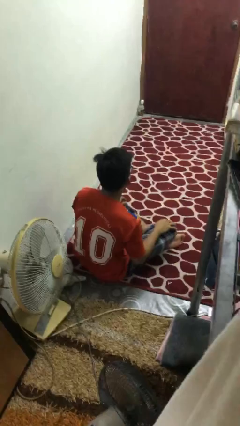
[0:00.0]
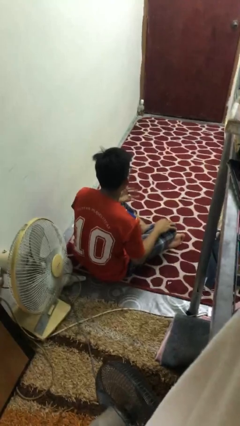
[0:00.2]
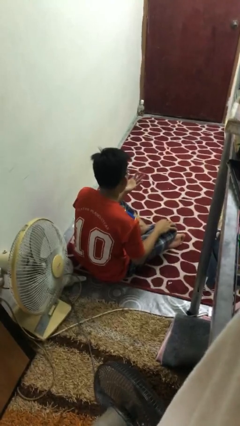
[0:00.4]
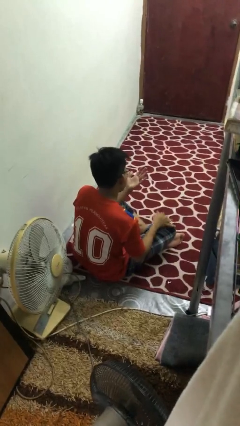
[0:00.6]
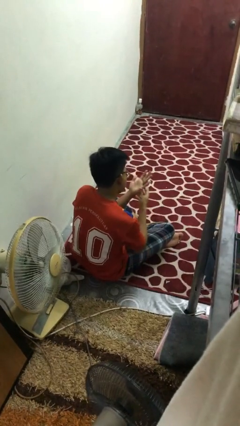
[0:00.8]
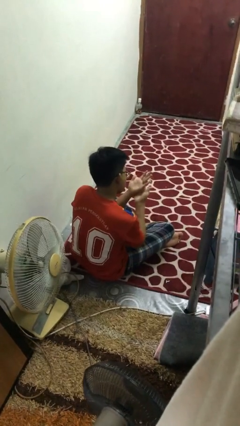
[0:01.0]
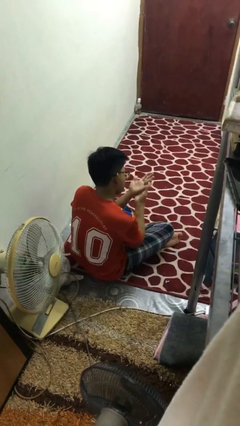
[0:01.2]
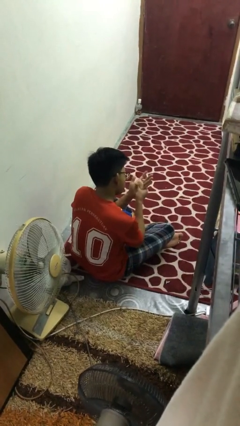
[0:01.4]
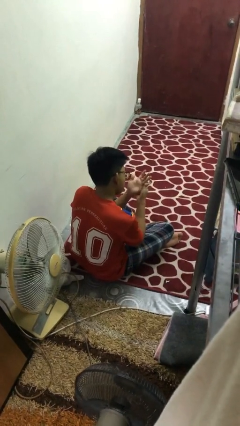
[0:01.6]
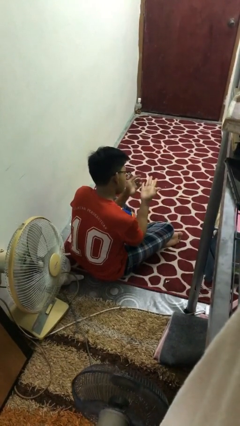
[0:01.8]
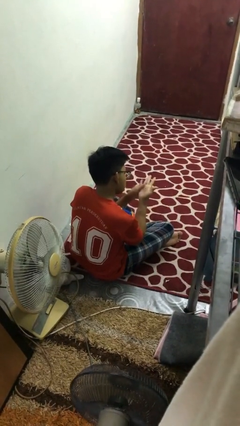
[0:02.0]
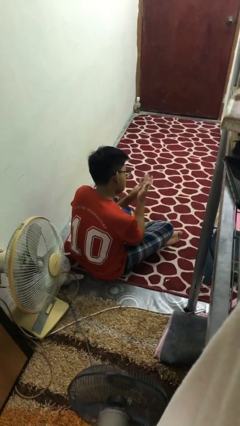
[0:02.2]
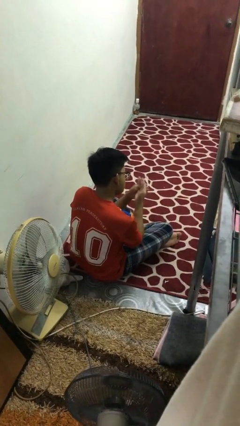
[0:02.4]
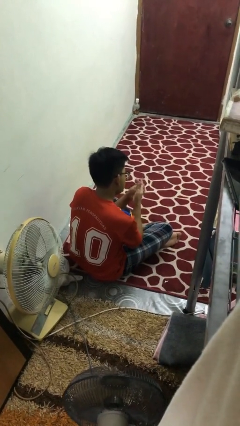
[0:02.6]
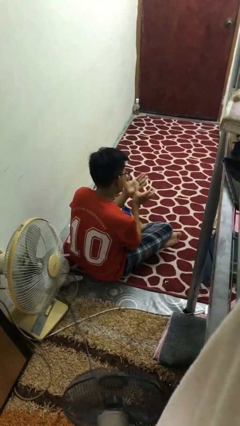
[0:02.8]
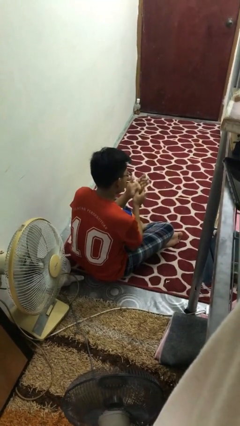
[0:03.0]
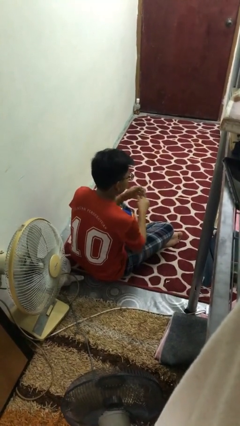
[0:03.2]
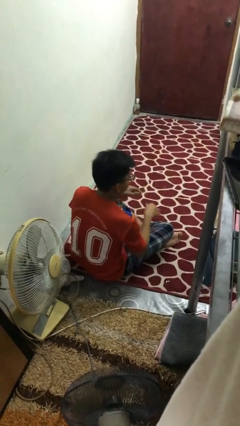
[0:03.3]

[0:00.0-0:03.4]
person looks at hands in lap

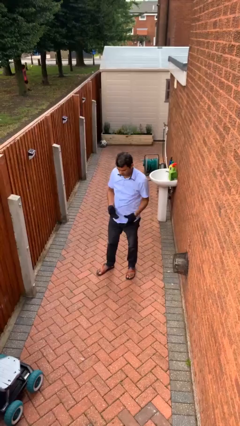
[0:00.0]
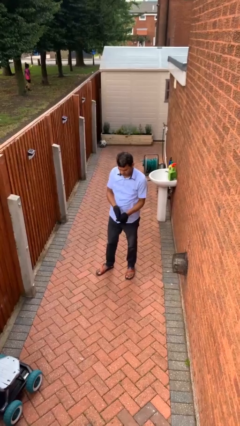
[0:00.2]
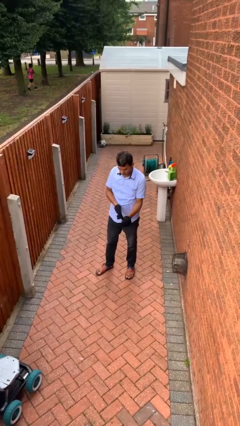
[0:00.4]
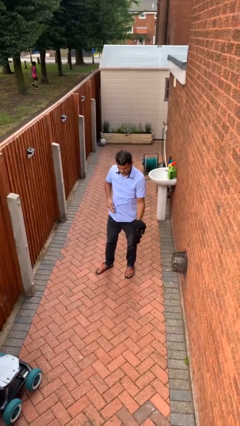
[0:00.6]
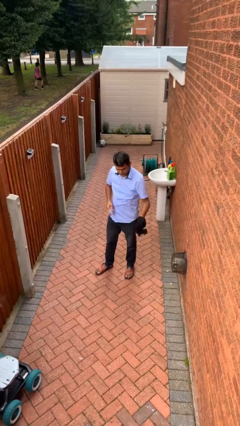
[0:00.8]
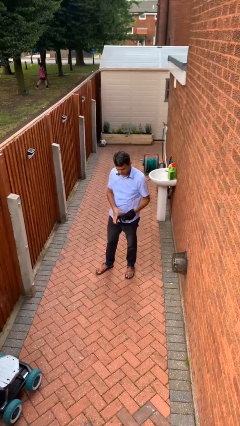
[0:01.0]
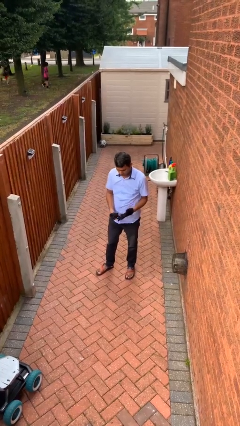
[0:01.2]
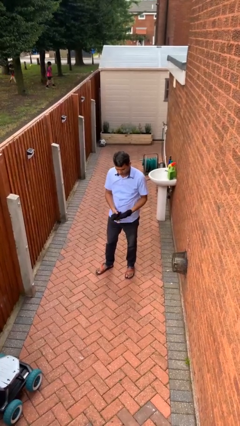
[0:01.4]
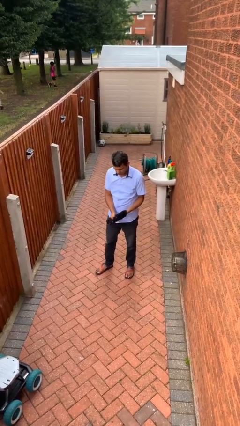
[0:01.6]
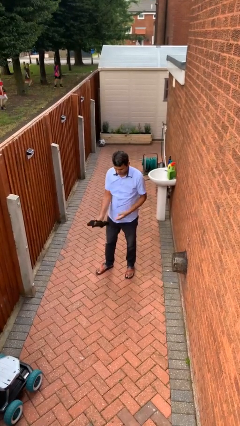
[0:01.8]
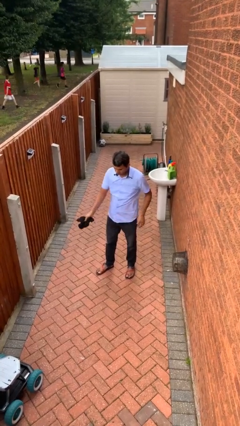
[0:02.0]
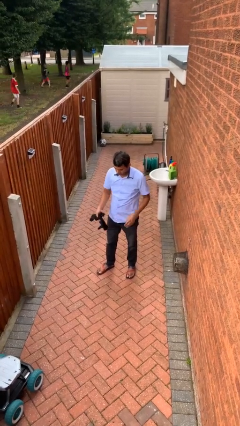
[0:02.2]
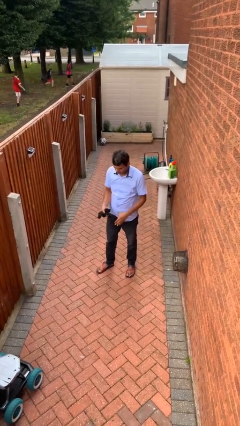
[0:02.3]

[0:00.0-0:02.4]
person takes off gloves

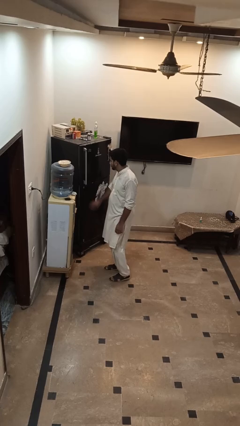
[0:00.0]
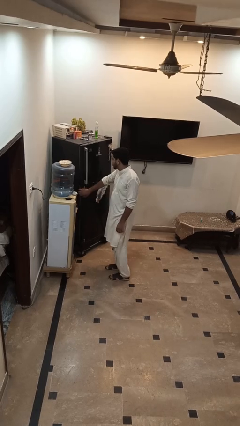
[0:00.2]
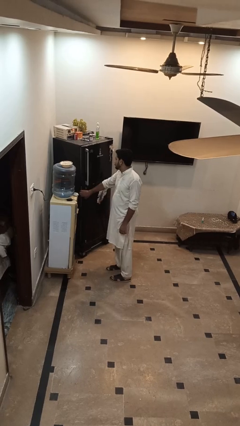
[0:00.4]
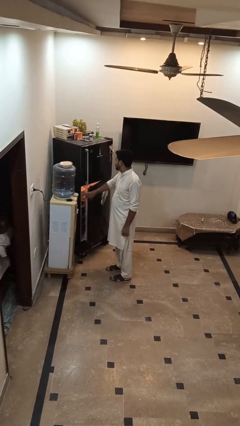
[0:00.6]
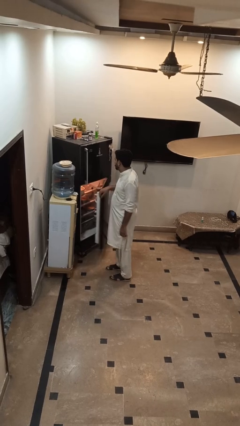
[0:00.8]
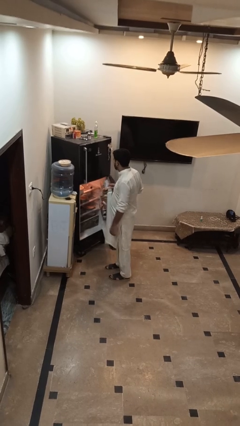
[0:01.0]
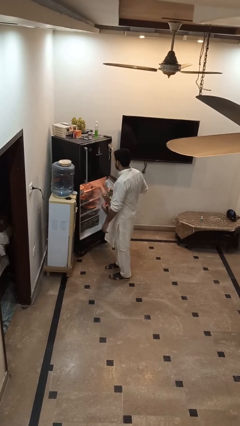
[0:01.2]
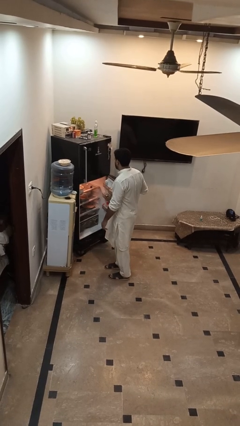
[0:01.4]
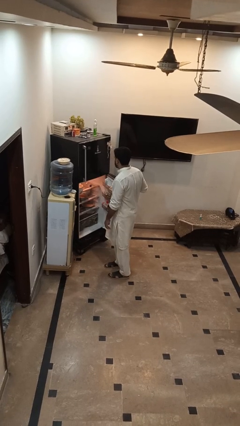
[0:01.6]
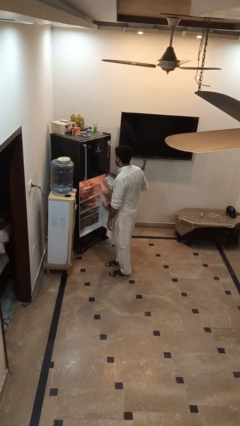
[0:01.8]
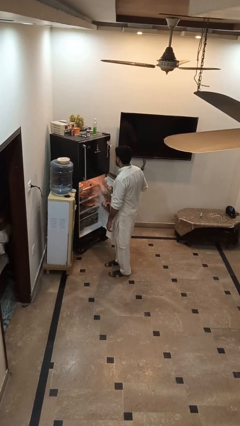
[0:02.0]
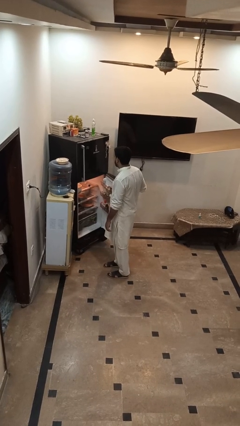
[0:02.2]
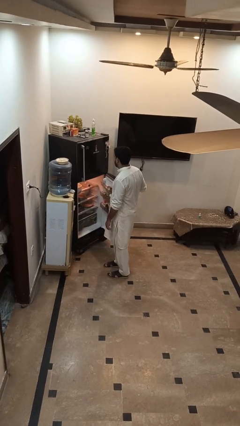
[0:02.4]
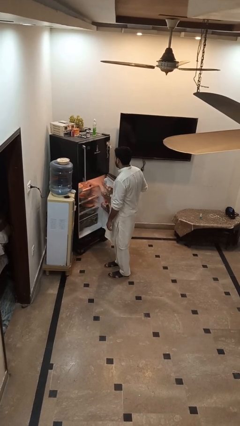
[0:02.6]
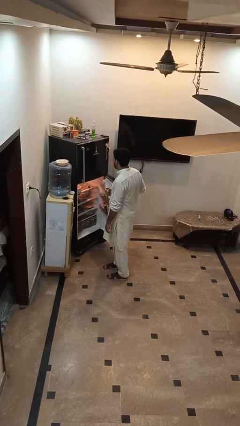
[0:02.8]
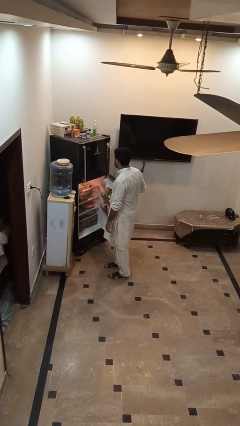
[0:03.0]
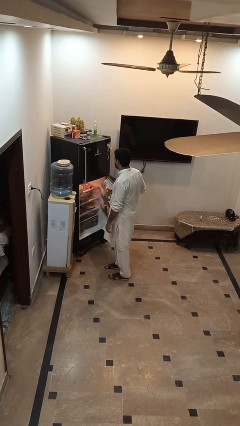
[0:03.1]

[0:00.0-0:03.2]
person opens refrigerator

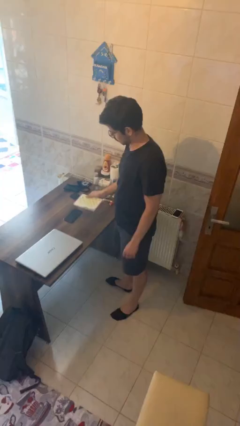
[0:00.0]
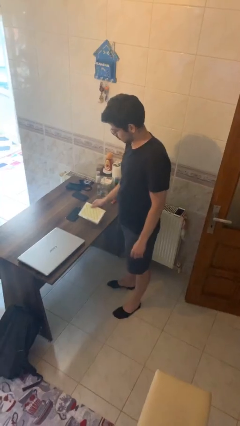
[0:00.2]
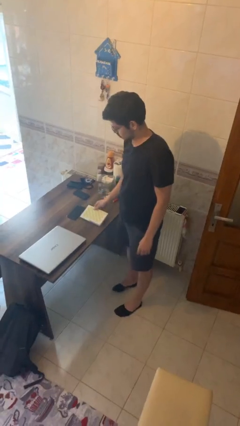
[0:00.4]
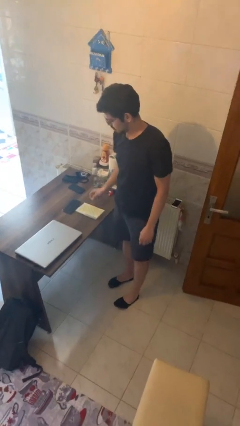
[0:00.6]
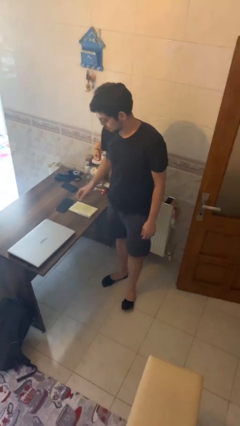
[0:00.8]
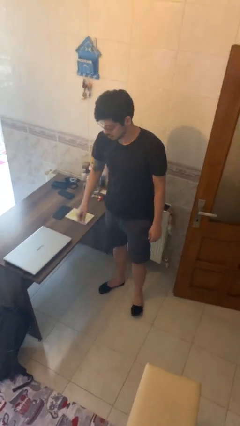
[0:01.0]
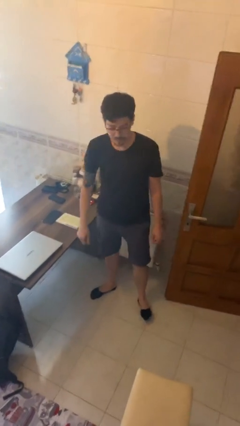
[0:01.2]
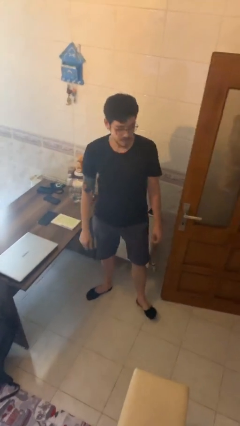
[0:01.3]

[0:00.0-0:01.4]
person puts down object on table

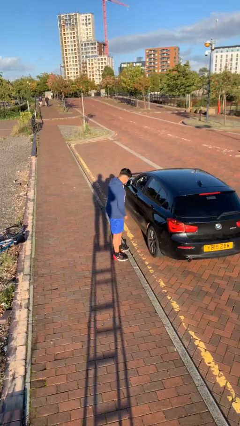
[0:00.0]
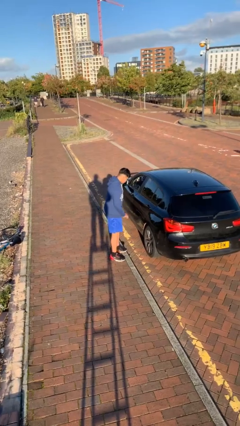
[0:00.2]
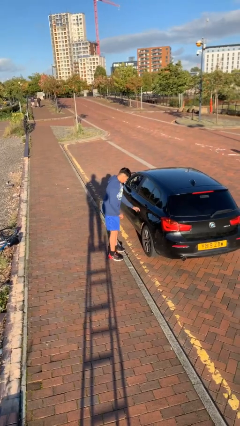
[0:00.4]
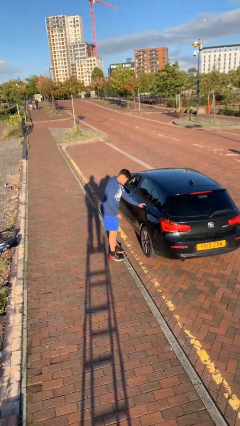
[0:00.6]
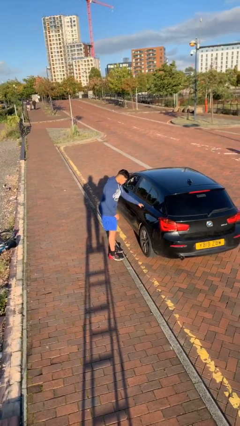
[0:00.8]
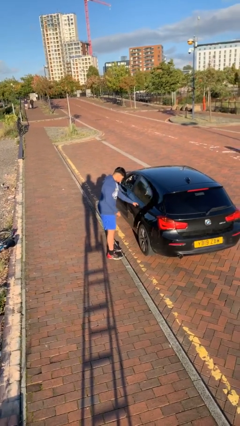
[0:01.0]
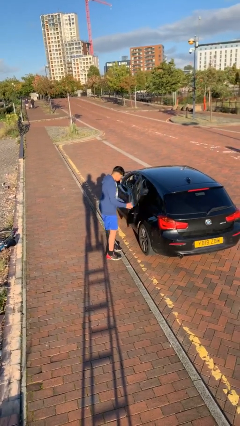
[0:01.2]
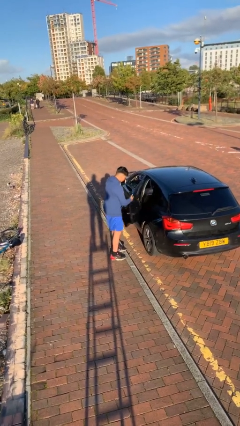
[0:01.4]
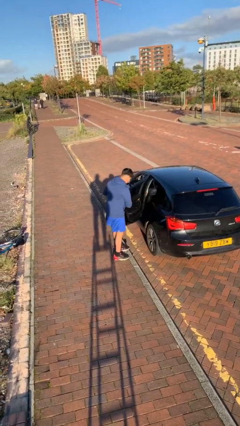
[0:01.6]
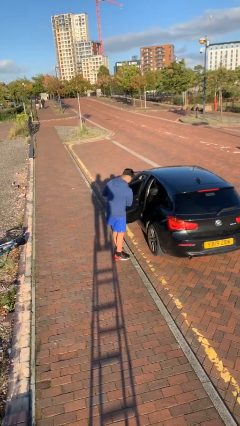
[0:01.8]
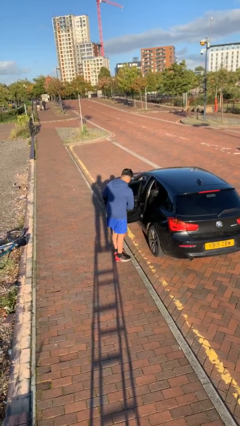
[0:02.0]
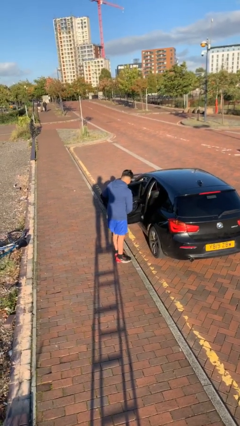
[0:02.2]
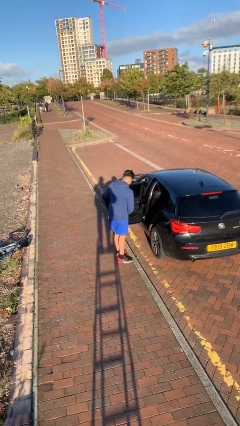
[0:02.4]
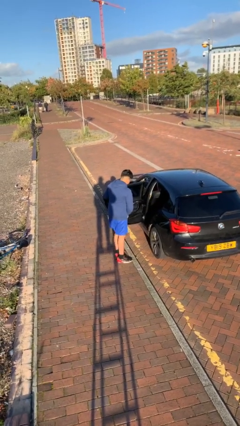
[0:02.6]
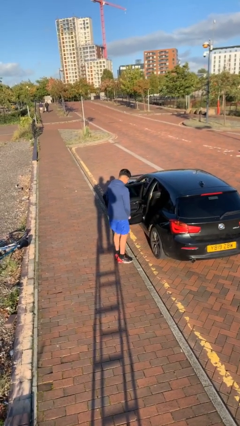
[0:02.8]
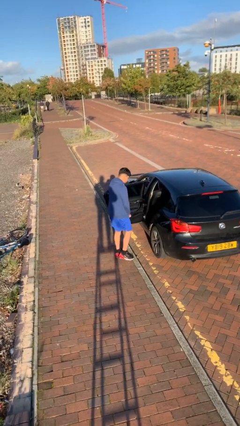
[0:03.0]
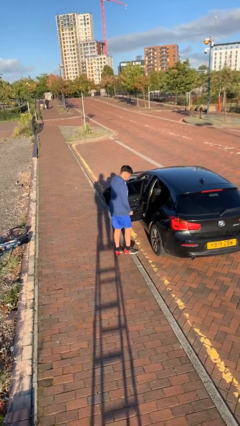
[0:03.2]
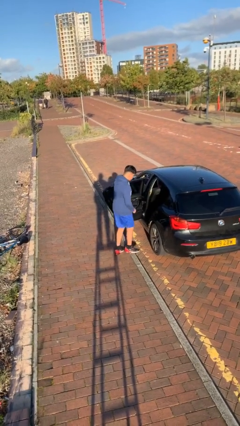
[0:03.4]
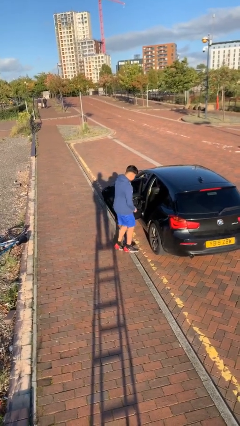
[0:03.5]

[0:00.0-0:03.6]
person opens car door

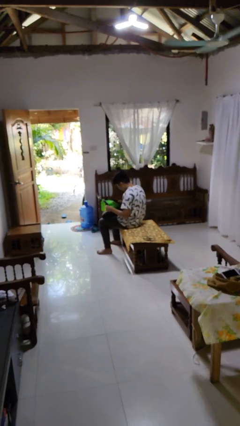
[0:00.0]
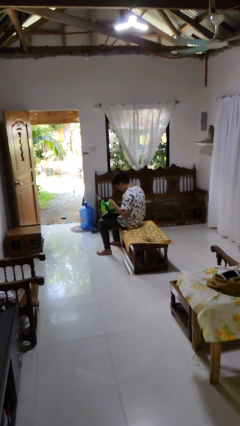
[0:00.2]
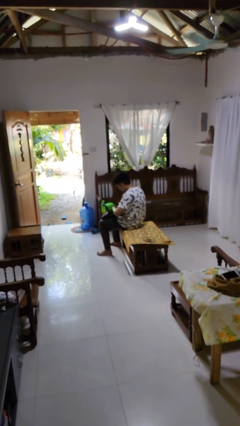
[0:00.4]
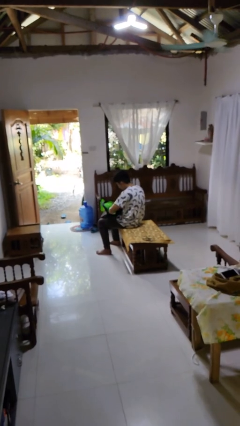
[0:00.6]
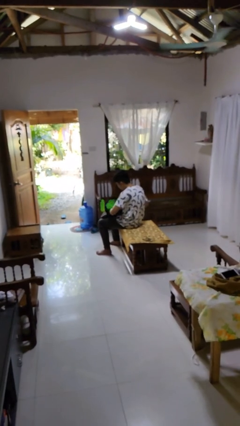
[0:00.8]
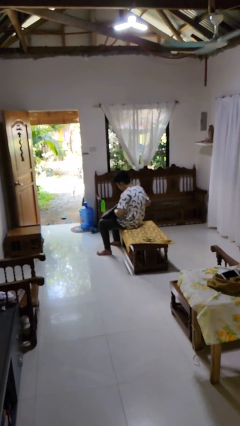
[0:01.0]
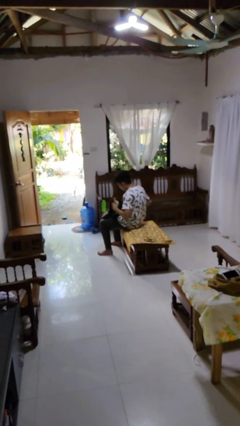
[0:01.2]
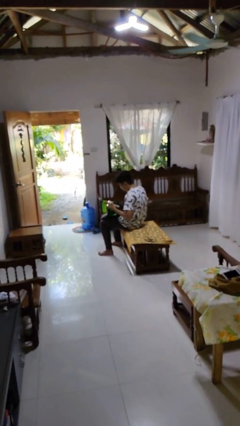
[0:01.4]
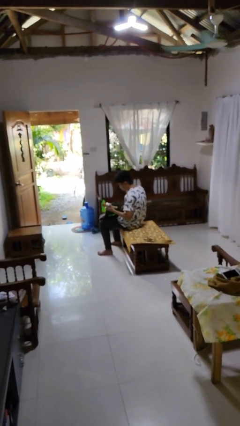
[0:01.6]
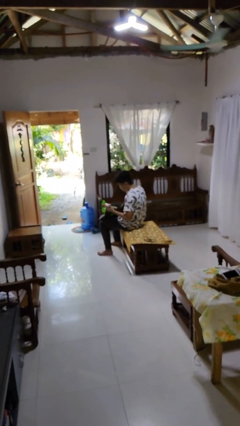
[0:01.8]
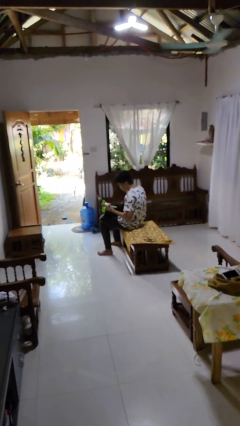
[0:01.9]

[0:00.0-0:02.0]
person takes object from backpack

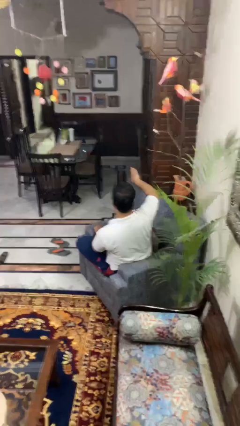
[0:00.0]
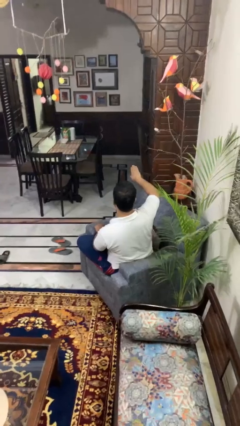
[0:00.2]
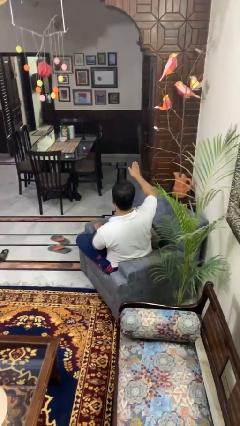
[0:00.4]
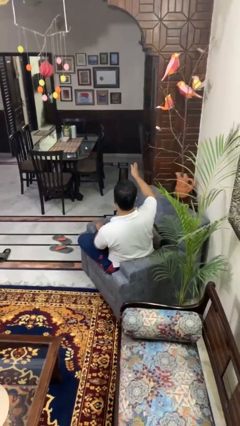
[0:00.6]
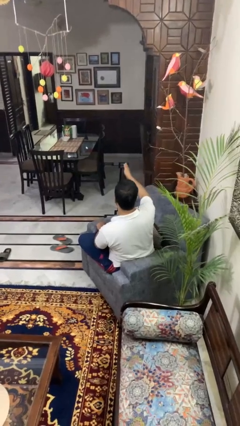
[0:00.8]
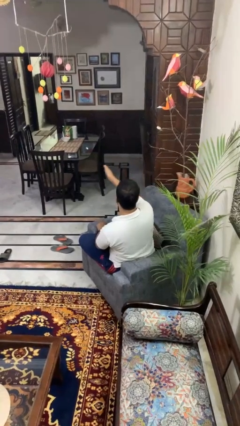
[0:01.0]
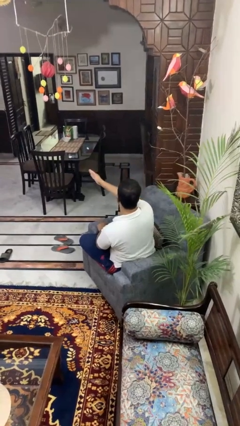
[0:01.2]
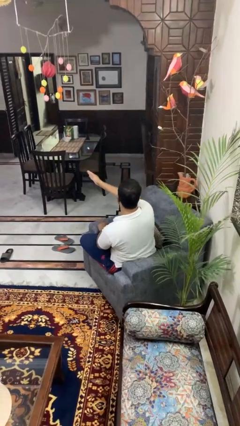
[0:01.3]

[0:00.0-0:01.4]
person gestures swipe left
